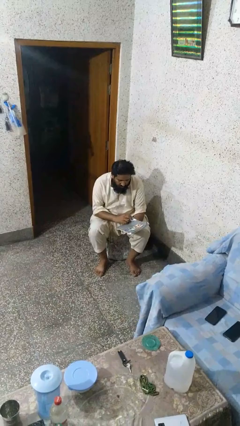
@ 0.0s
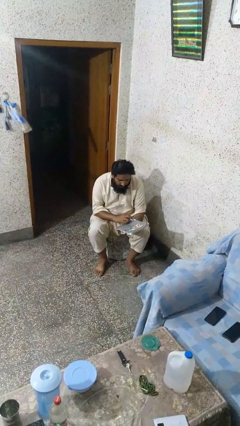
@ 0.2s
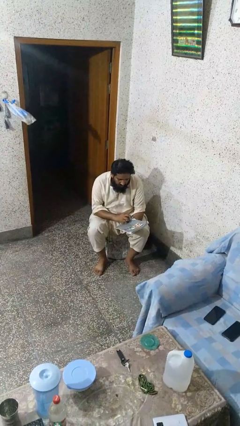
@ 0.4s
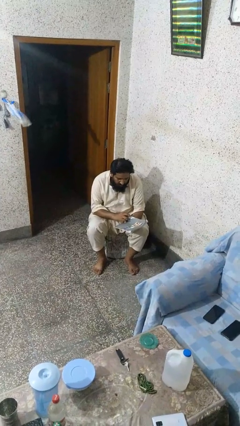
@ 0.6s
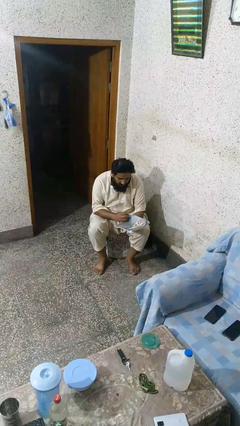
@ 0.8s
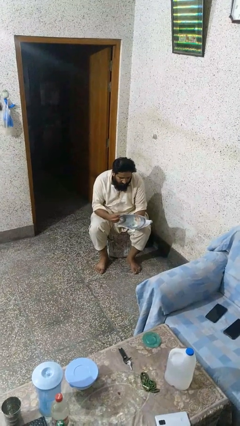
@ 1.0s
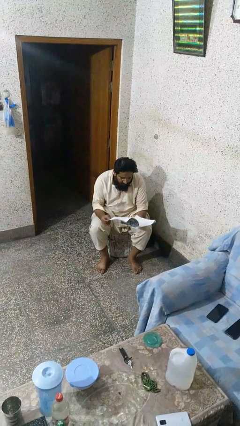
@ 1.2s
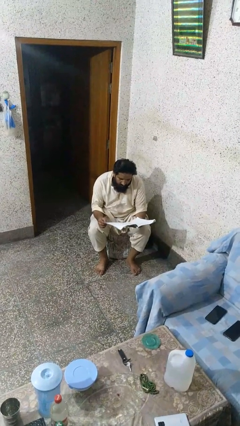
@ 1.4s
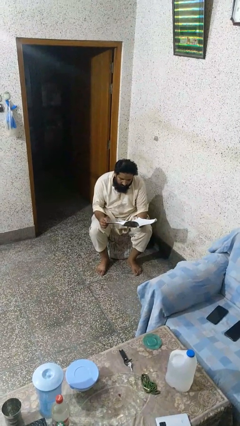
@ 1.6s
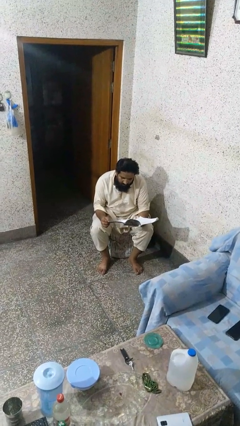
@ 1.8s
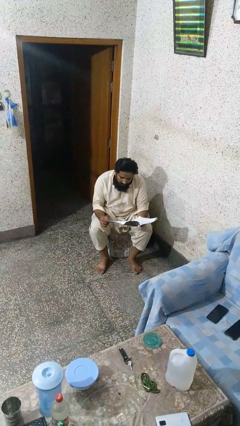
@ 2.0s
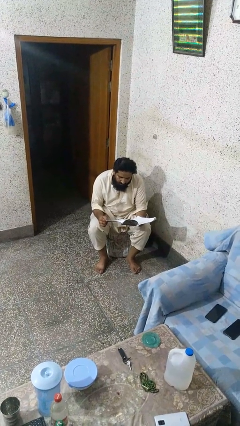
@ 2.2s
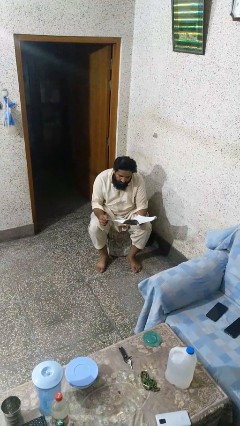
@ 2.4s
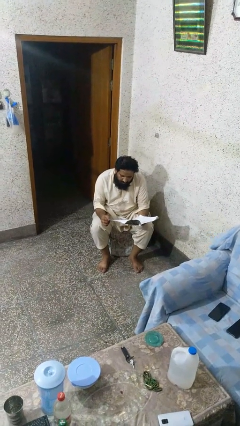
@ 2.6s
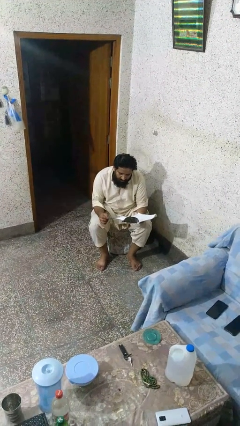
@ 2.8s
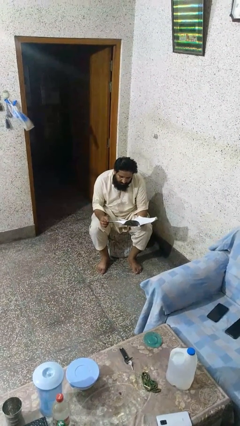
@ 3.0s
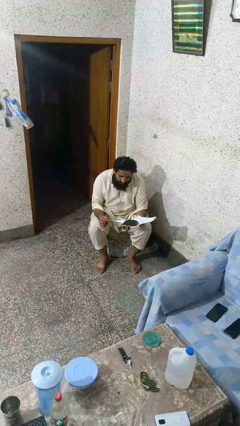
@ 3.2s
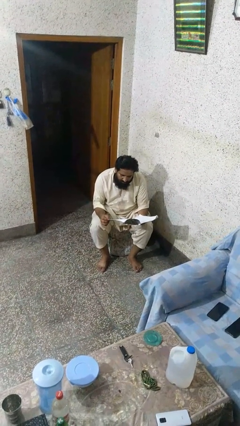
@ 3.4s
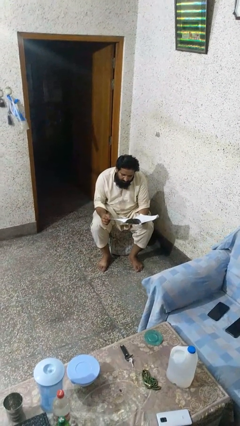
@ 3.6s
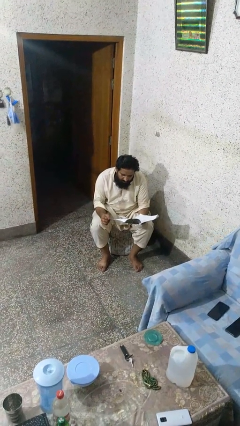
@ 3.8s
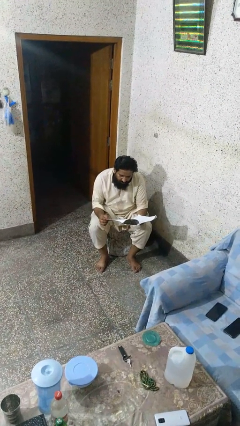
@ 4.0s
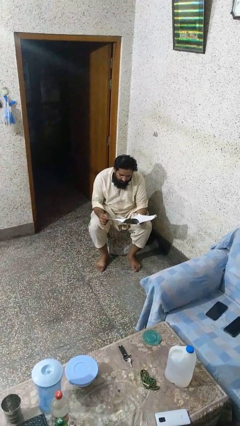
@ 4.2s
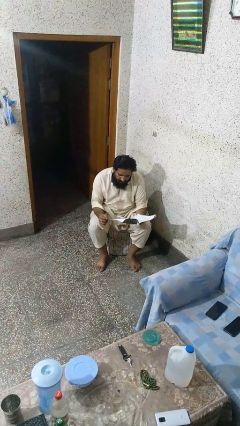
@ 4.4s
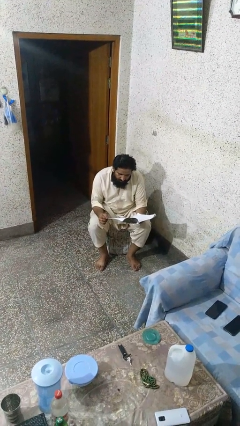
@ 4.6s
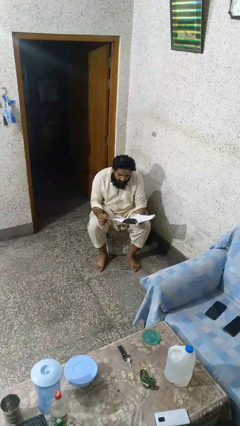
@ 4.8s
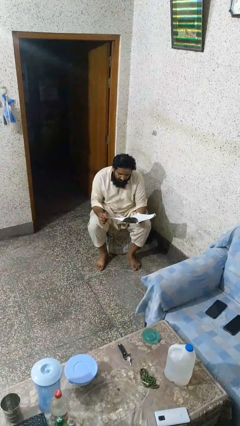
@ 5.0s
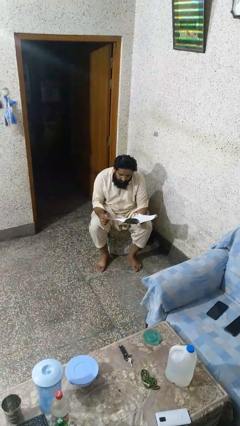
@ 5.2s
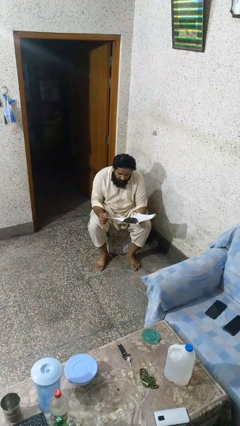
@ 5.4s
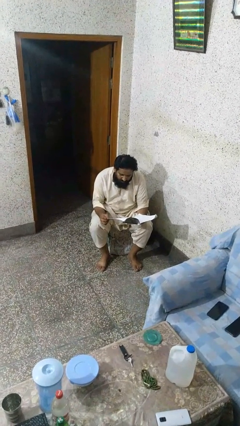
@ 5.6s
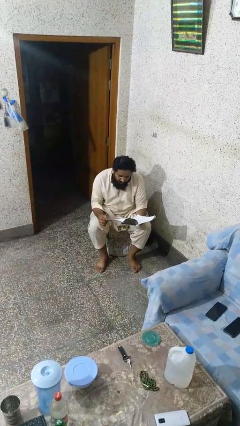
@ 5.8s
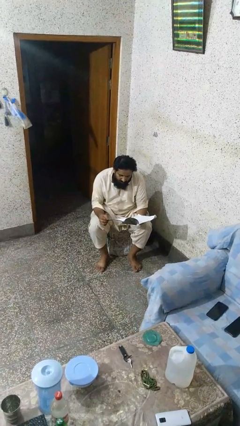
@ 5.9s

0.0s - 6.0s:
person reads magazine

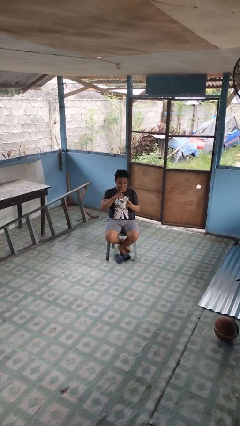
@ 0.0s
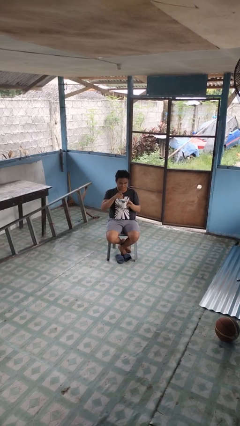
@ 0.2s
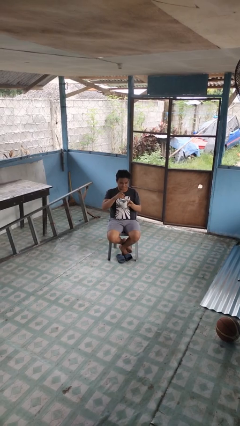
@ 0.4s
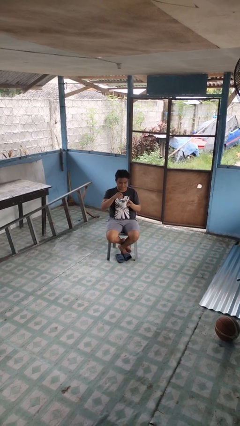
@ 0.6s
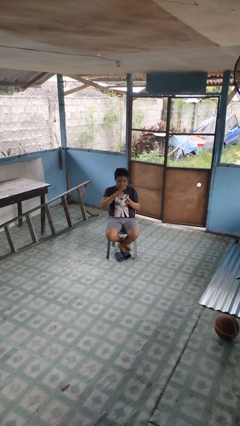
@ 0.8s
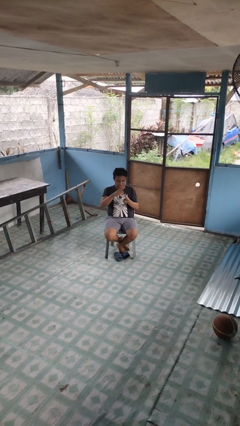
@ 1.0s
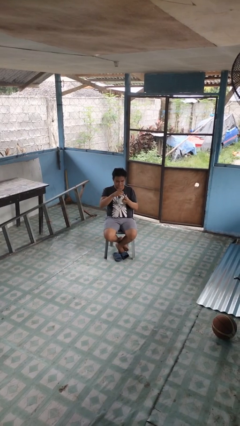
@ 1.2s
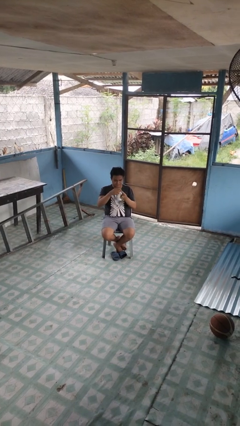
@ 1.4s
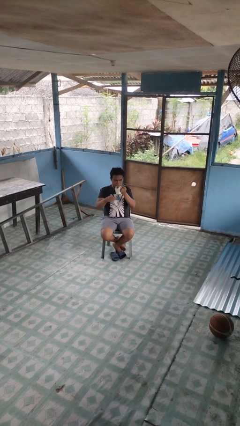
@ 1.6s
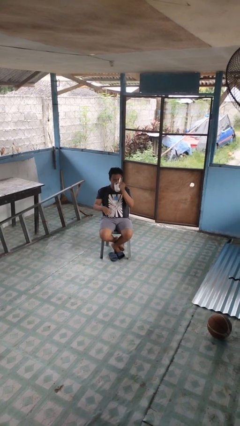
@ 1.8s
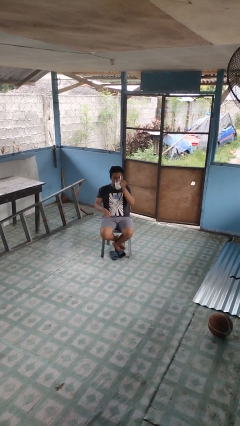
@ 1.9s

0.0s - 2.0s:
person stirs mug

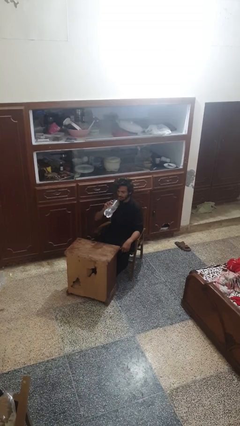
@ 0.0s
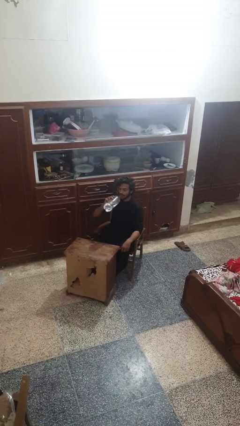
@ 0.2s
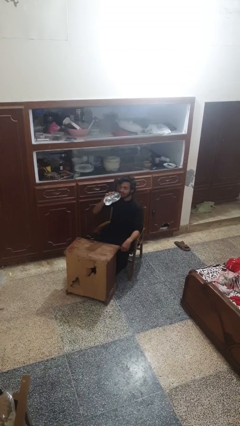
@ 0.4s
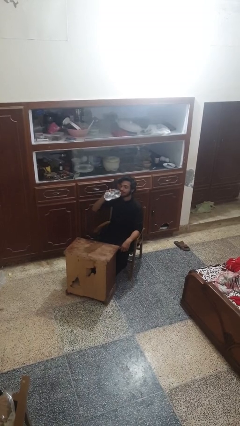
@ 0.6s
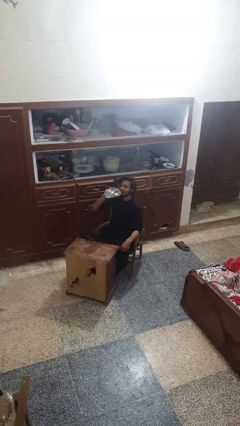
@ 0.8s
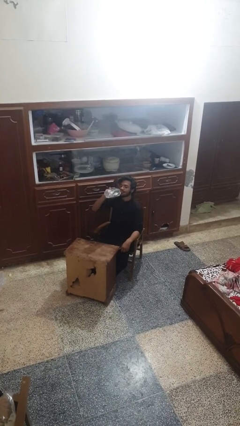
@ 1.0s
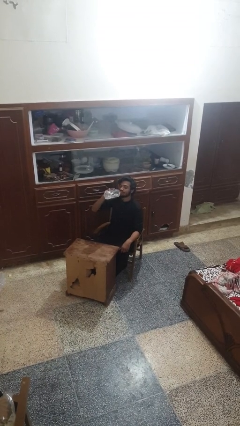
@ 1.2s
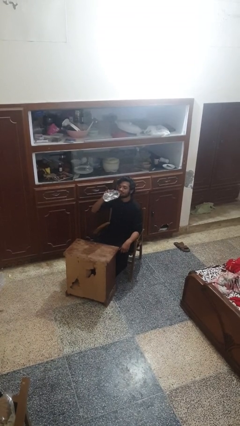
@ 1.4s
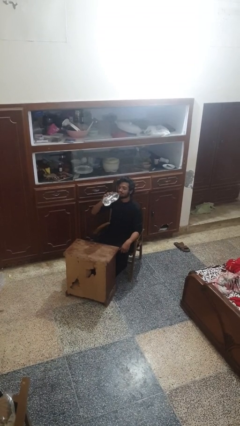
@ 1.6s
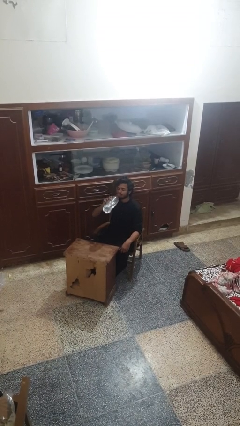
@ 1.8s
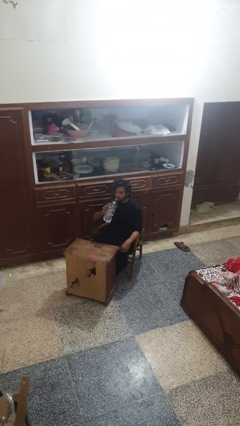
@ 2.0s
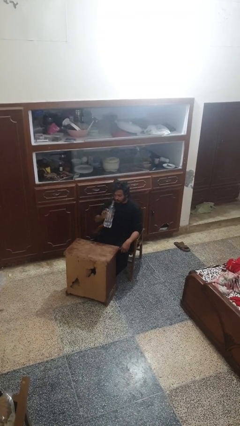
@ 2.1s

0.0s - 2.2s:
person drinks from bottle

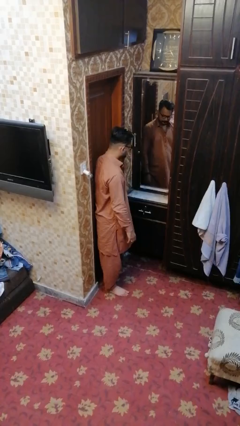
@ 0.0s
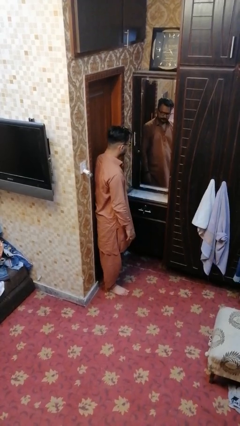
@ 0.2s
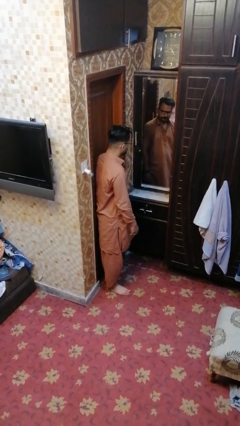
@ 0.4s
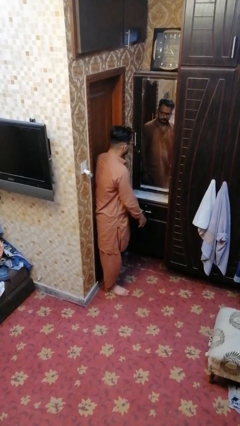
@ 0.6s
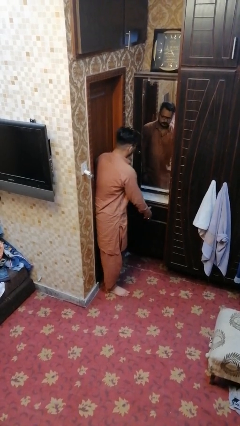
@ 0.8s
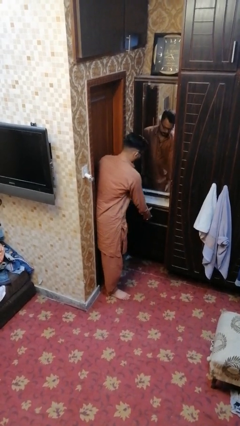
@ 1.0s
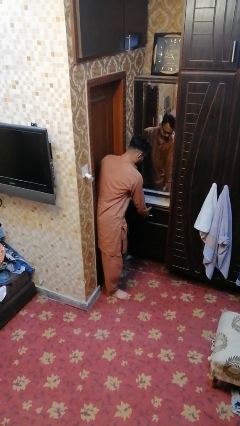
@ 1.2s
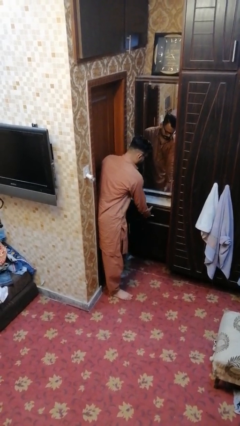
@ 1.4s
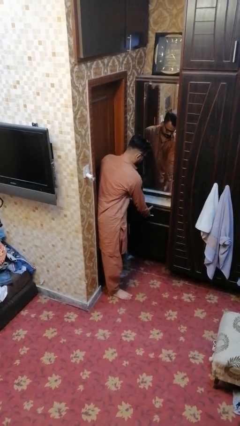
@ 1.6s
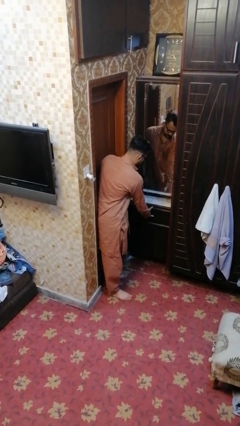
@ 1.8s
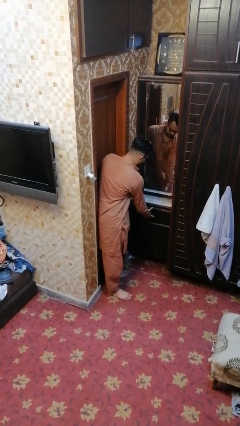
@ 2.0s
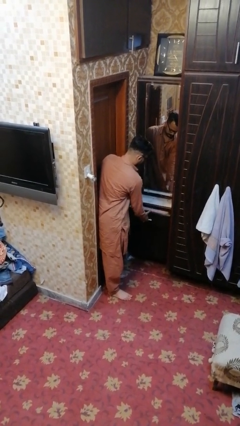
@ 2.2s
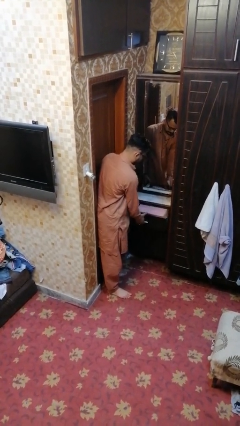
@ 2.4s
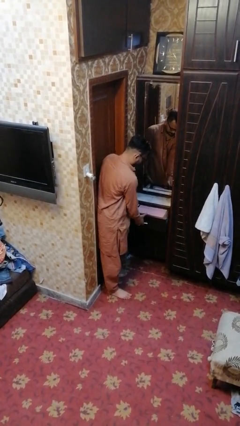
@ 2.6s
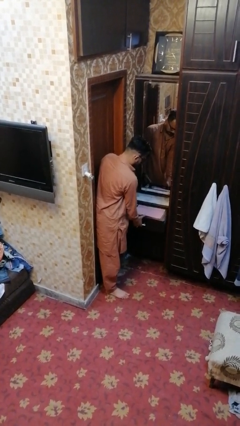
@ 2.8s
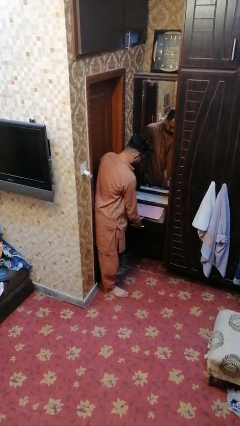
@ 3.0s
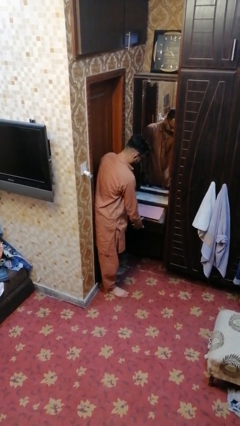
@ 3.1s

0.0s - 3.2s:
person opens dresser drawer

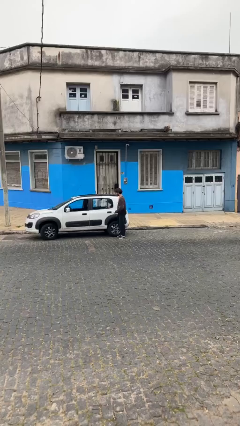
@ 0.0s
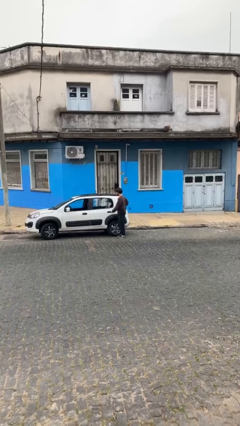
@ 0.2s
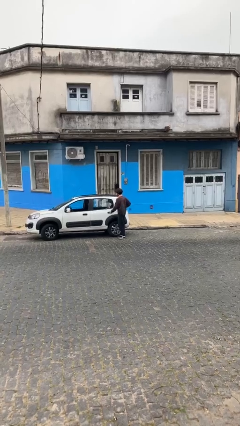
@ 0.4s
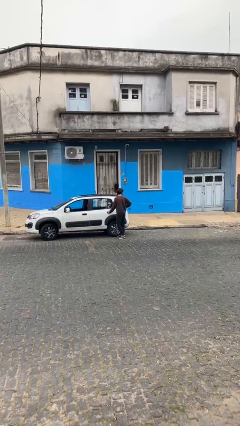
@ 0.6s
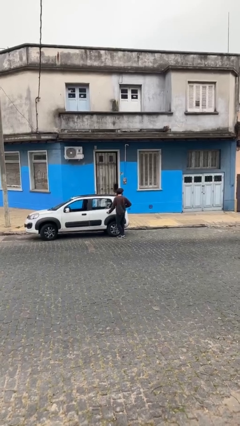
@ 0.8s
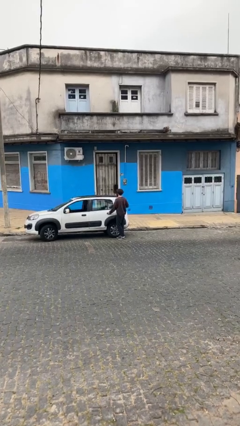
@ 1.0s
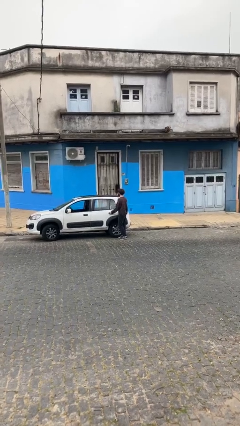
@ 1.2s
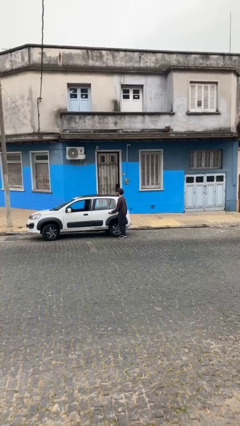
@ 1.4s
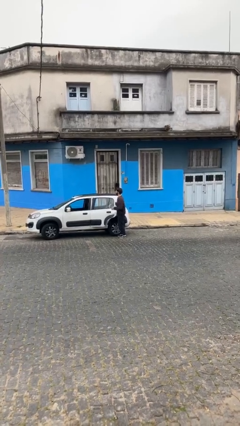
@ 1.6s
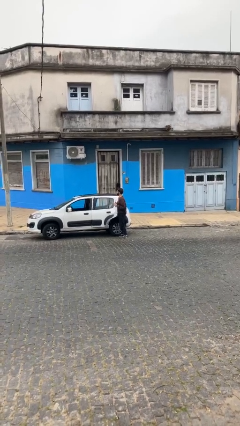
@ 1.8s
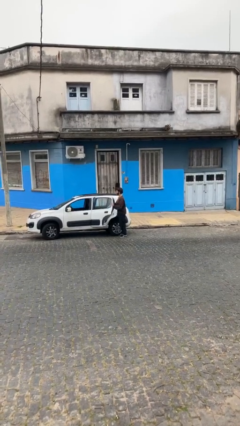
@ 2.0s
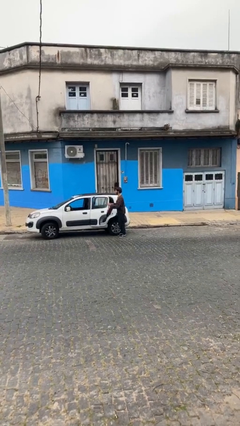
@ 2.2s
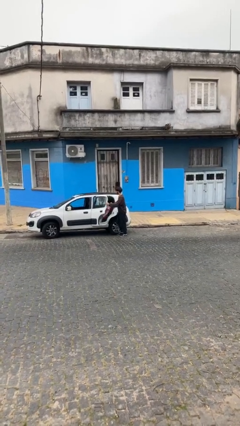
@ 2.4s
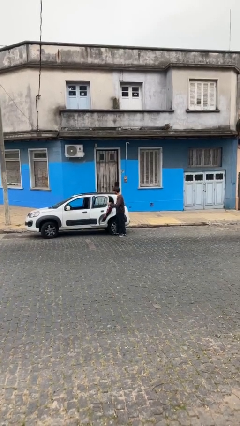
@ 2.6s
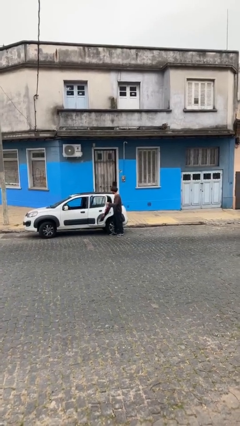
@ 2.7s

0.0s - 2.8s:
person opens car door

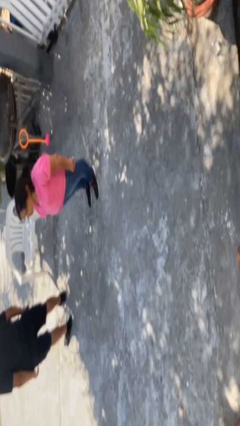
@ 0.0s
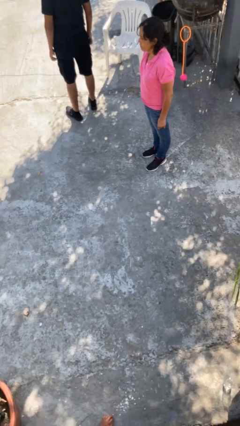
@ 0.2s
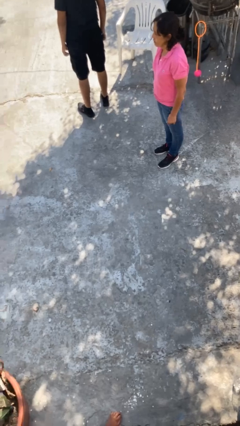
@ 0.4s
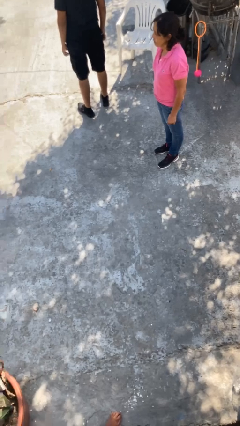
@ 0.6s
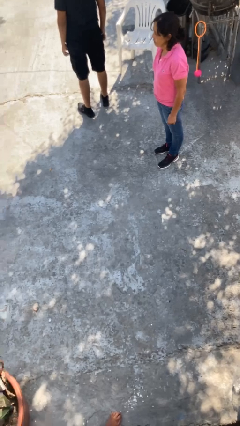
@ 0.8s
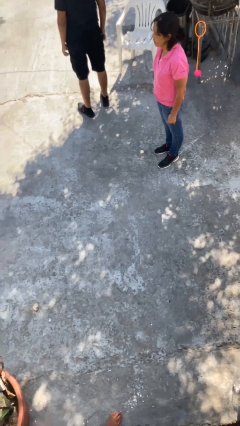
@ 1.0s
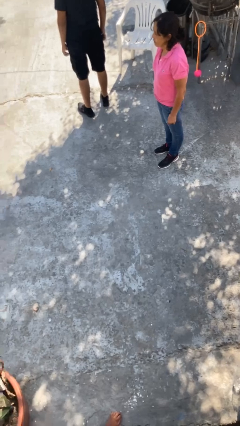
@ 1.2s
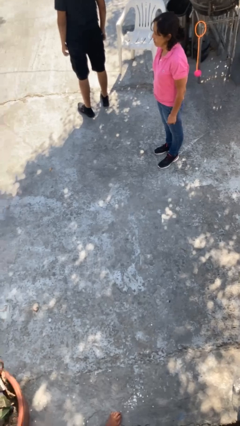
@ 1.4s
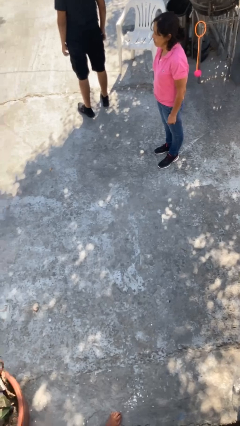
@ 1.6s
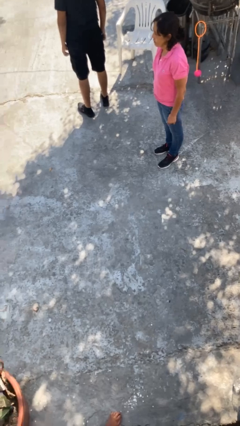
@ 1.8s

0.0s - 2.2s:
person looks over shoulder
